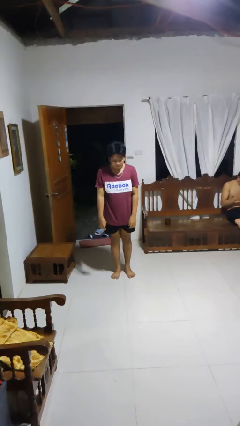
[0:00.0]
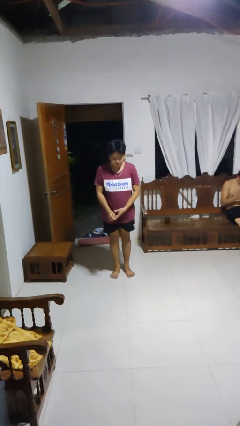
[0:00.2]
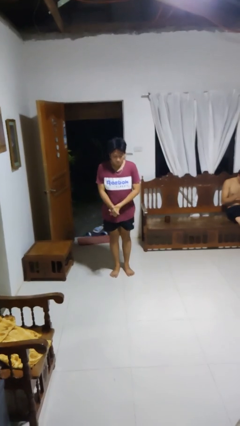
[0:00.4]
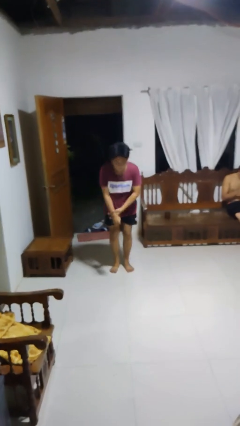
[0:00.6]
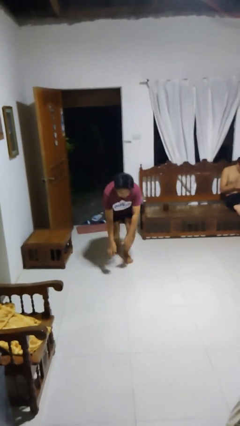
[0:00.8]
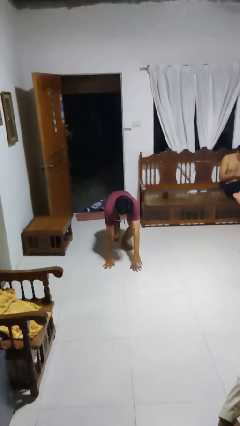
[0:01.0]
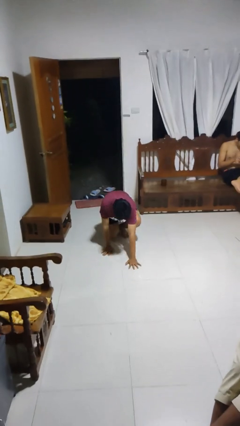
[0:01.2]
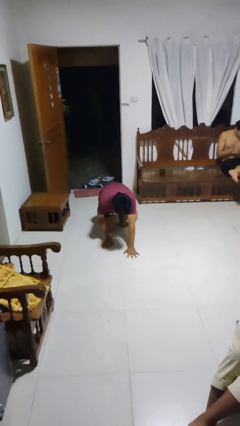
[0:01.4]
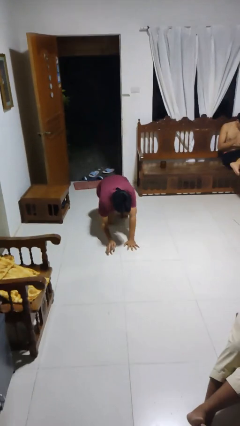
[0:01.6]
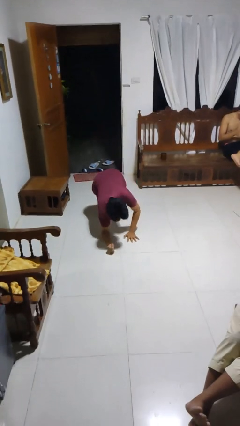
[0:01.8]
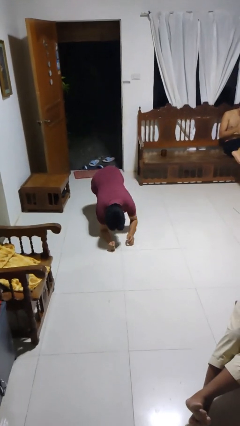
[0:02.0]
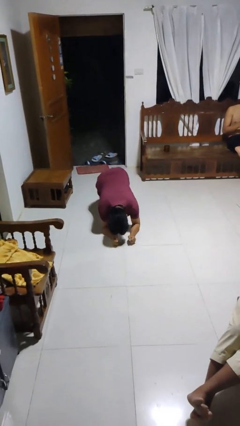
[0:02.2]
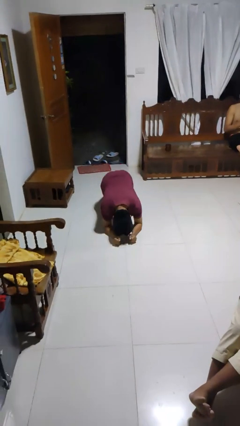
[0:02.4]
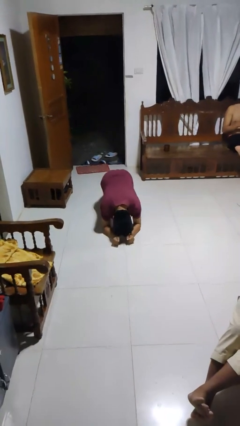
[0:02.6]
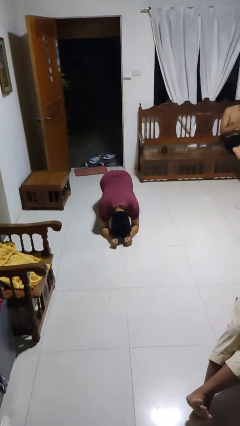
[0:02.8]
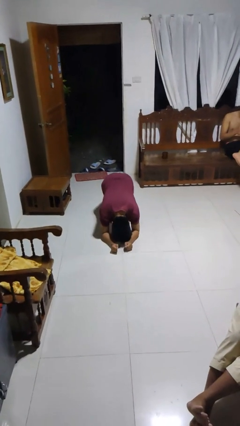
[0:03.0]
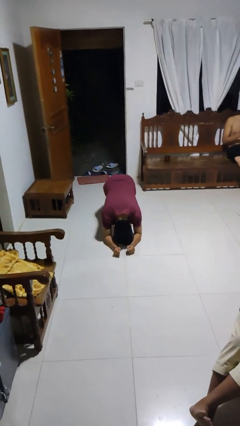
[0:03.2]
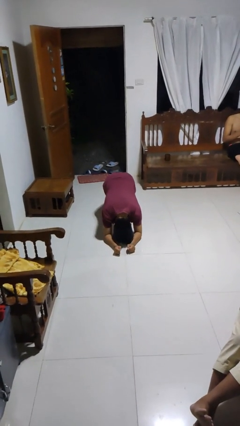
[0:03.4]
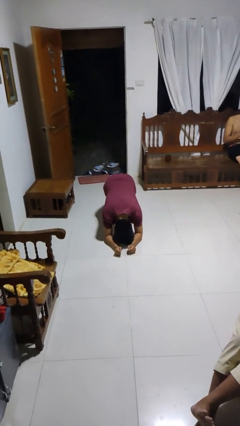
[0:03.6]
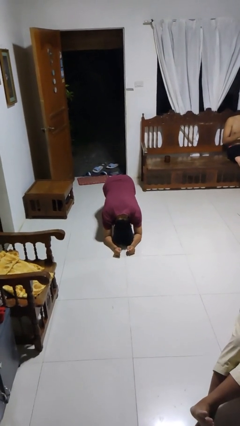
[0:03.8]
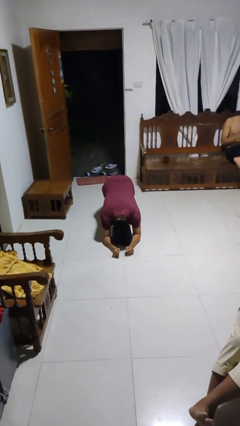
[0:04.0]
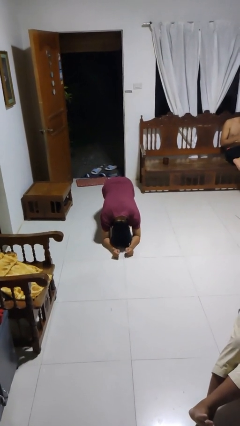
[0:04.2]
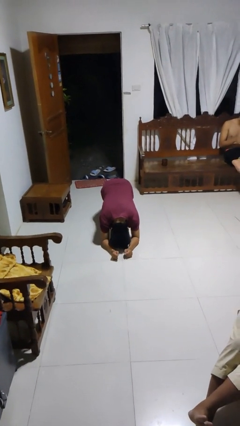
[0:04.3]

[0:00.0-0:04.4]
person exercises with plank

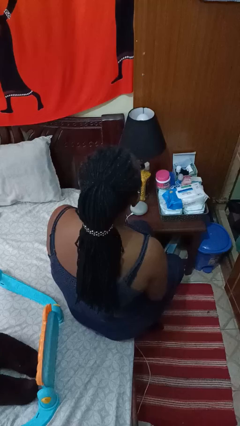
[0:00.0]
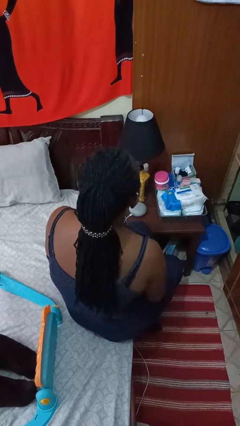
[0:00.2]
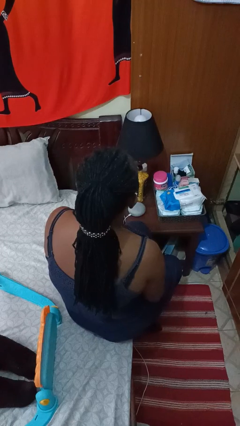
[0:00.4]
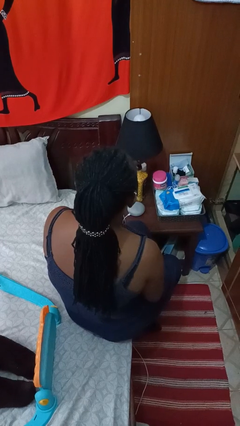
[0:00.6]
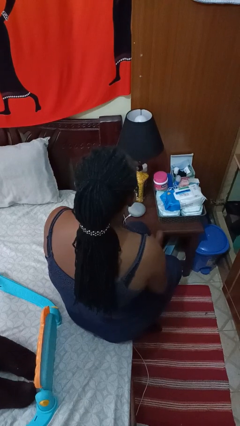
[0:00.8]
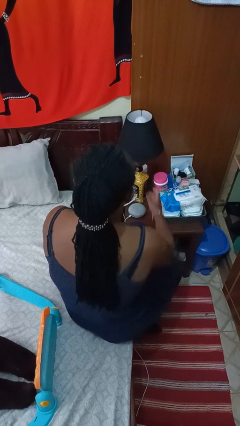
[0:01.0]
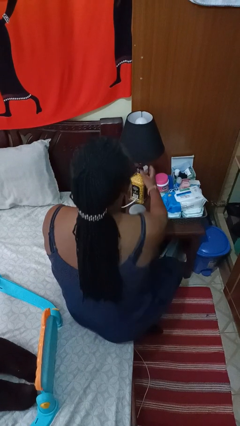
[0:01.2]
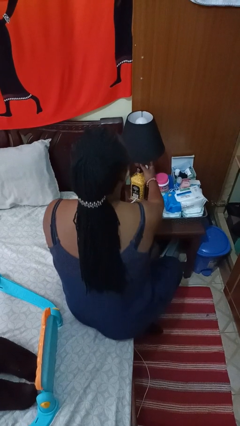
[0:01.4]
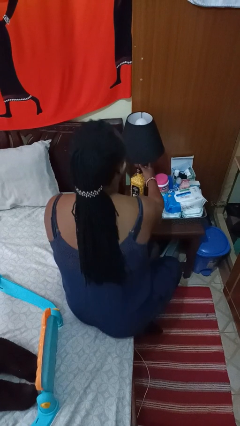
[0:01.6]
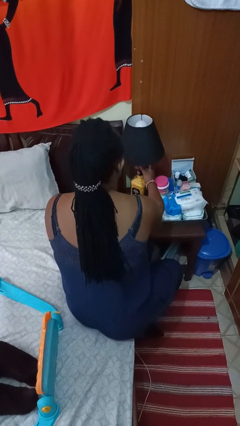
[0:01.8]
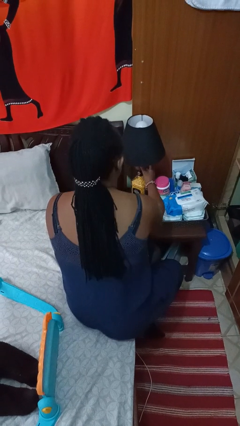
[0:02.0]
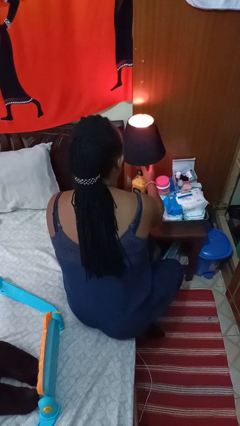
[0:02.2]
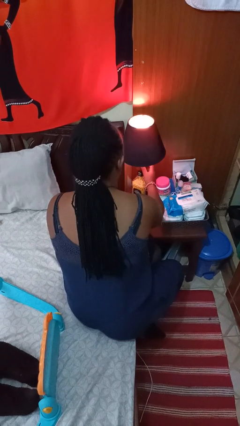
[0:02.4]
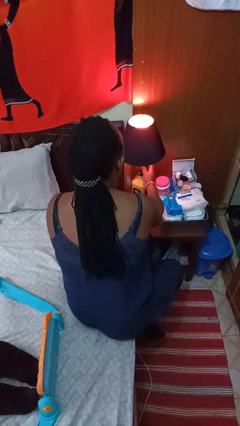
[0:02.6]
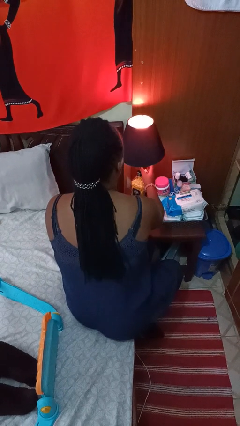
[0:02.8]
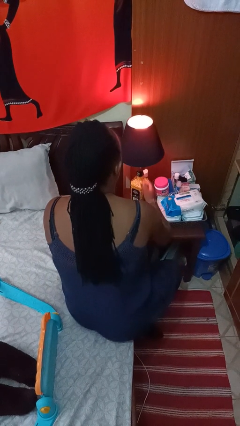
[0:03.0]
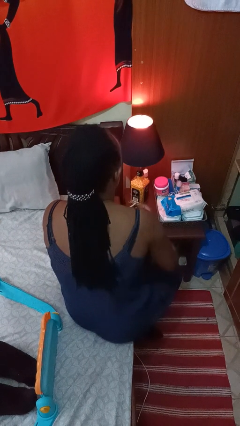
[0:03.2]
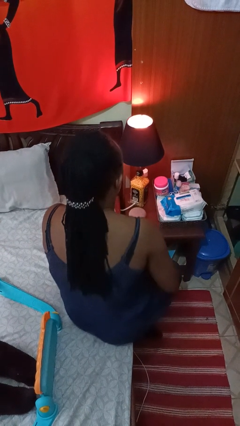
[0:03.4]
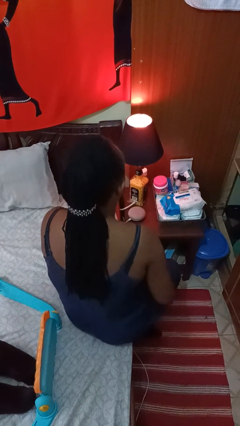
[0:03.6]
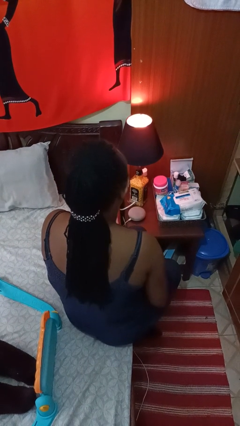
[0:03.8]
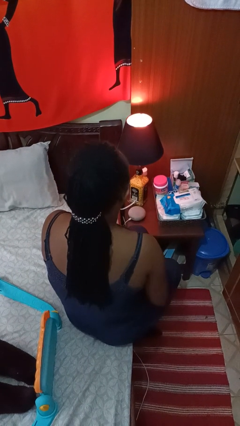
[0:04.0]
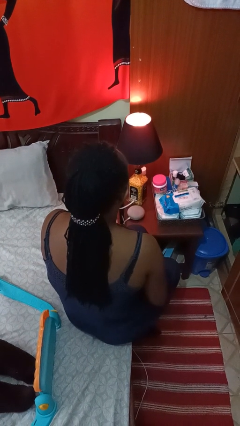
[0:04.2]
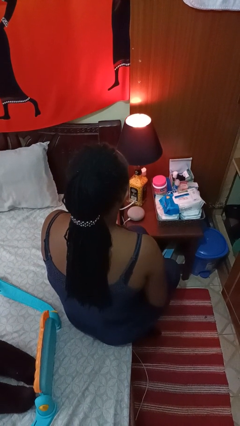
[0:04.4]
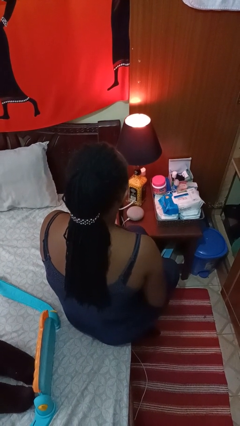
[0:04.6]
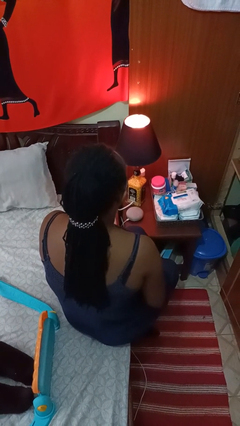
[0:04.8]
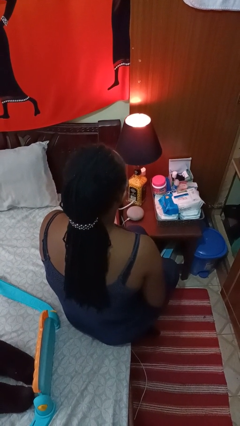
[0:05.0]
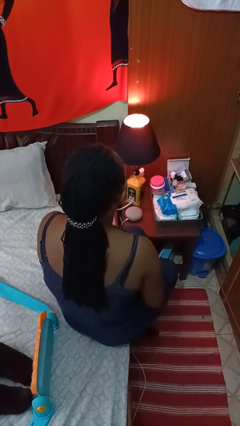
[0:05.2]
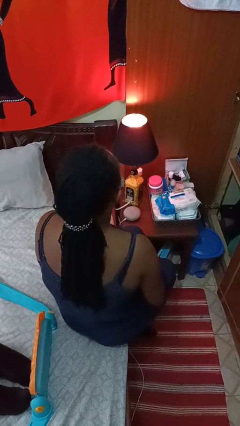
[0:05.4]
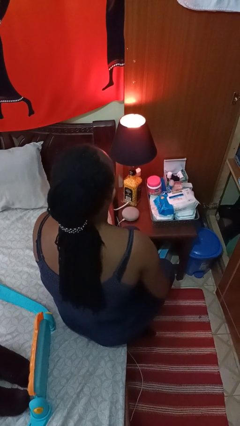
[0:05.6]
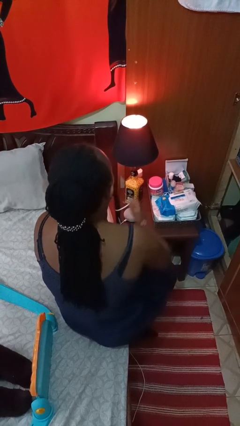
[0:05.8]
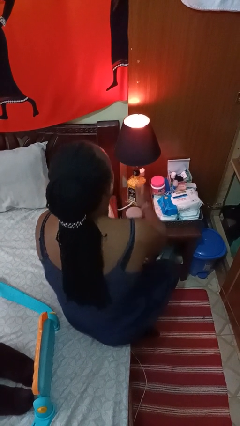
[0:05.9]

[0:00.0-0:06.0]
person turns on lamp

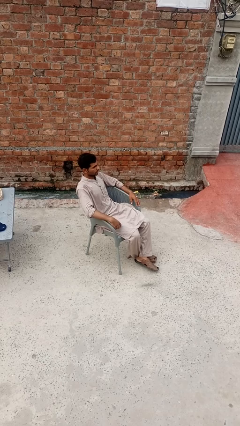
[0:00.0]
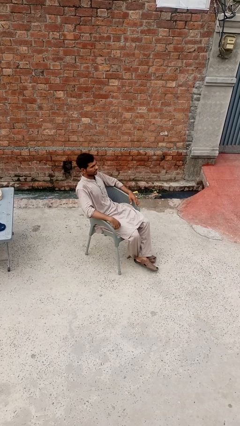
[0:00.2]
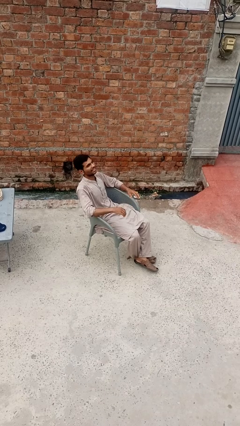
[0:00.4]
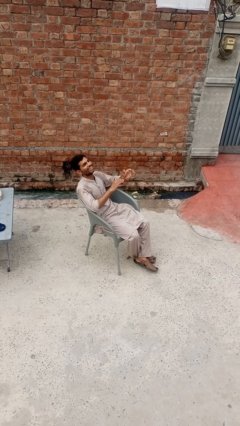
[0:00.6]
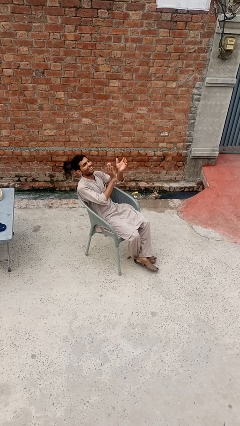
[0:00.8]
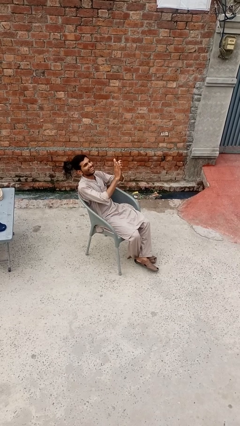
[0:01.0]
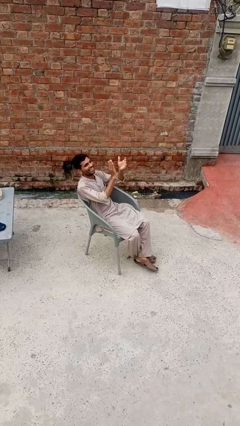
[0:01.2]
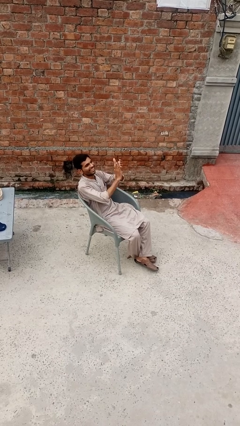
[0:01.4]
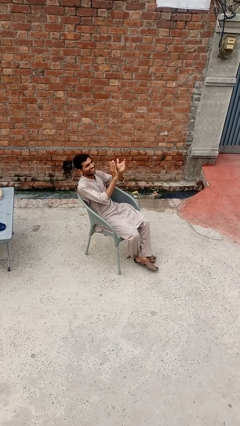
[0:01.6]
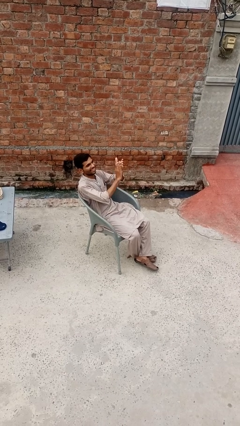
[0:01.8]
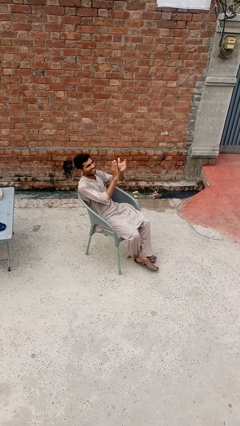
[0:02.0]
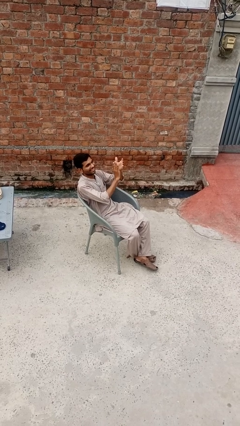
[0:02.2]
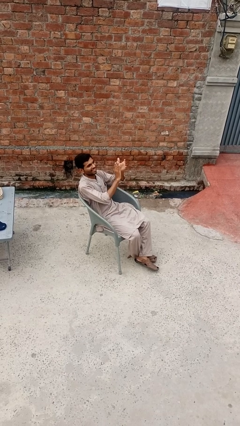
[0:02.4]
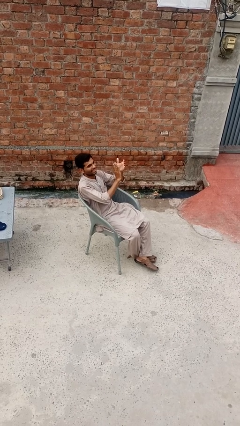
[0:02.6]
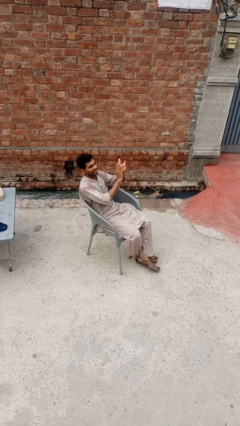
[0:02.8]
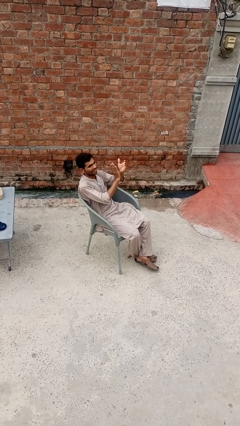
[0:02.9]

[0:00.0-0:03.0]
person claps hands

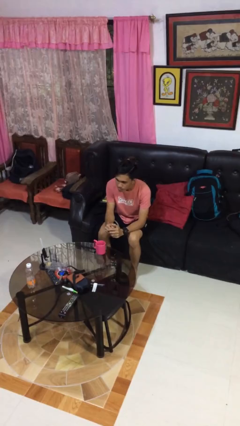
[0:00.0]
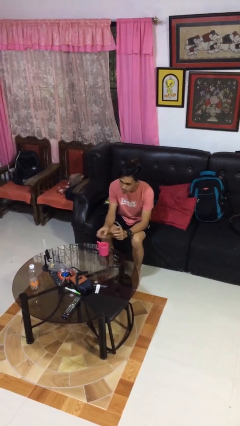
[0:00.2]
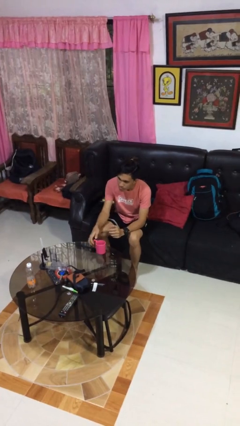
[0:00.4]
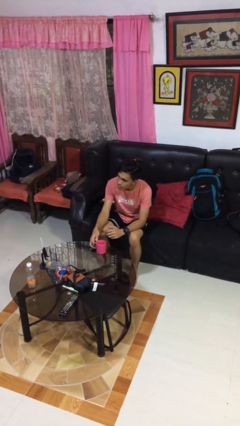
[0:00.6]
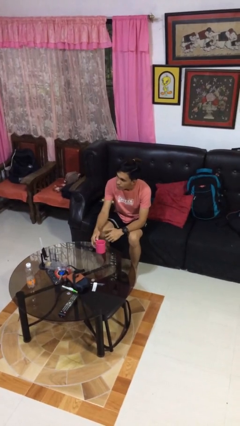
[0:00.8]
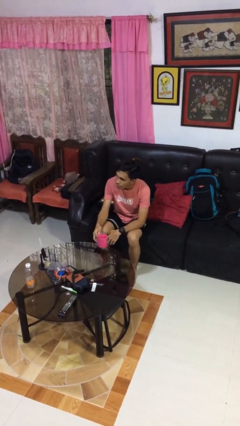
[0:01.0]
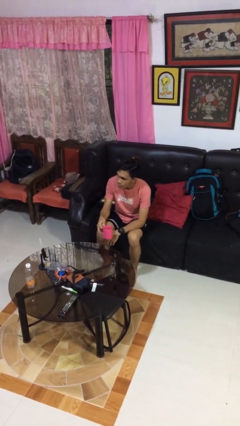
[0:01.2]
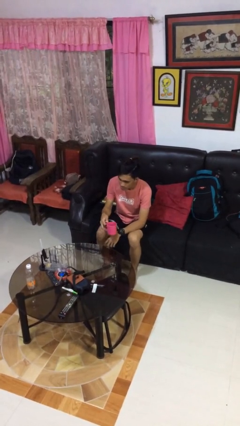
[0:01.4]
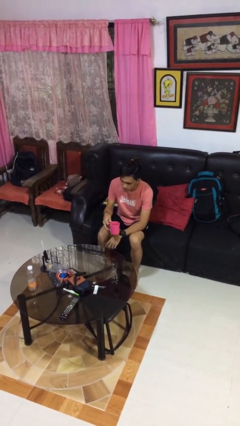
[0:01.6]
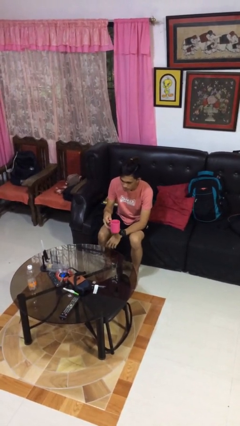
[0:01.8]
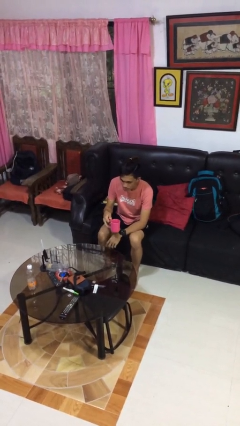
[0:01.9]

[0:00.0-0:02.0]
person picks up object from table

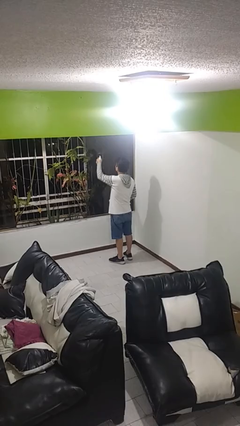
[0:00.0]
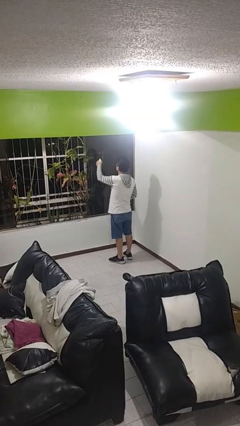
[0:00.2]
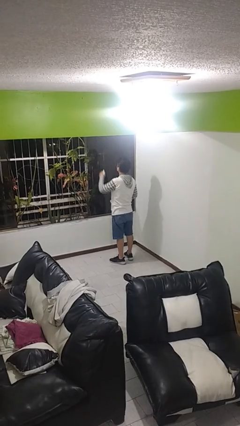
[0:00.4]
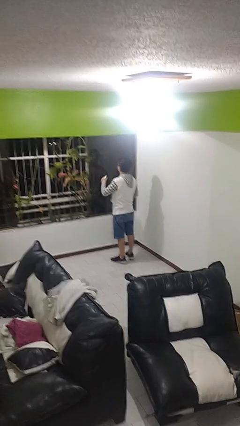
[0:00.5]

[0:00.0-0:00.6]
person sprays from bottle

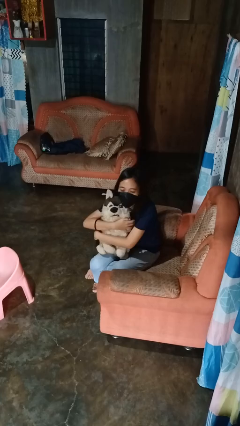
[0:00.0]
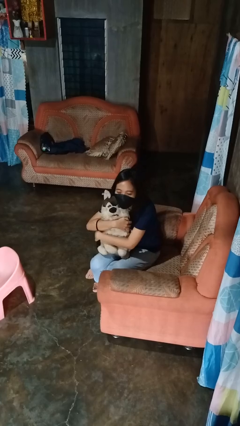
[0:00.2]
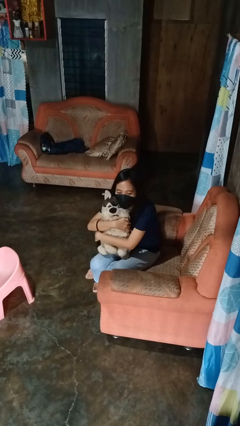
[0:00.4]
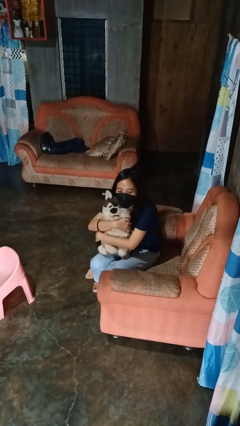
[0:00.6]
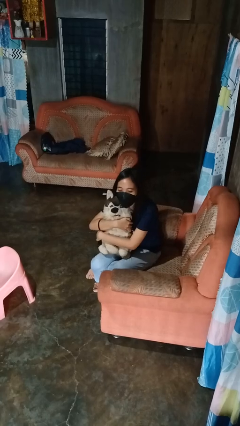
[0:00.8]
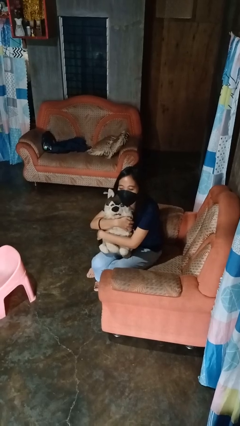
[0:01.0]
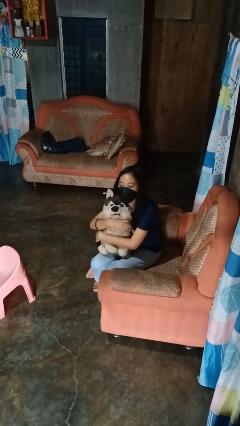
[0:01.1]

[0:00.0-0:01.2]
person hugs stuffed animal

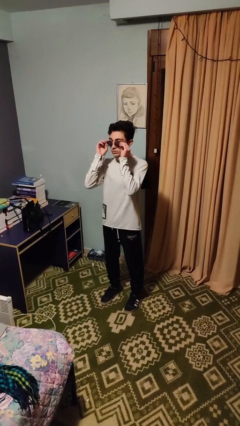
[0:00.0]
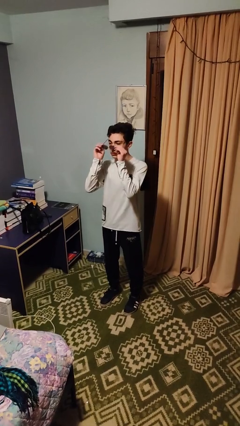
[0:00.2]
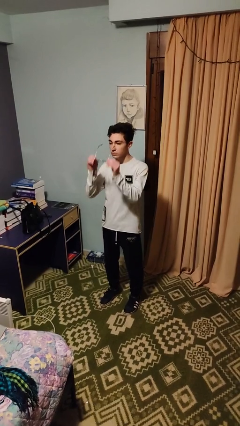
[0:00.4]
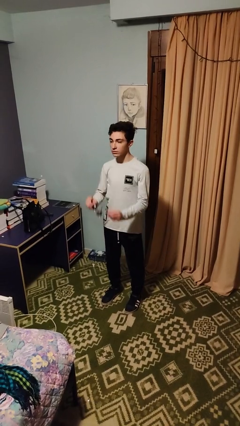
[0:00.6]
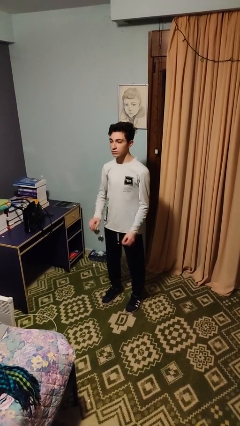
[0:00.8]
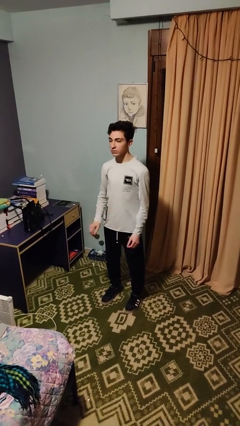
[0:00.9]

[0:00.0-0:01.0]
person takes off sunglasses
